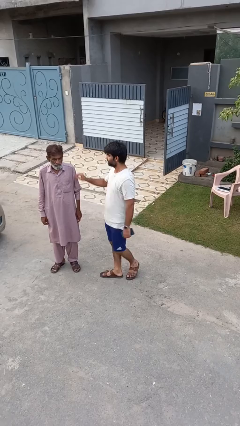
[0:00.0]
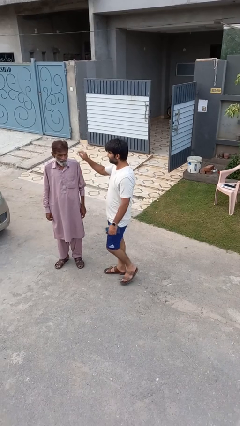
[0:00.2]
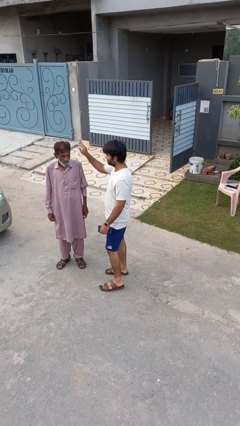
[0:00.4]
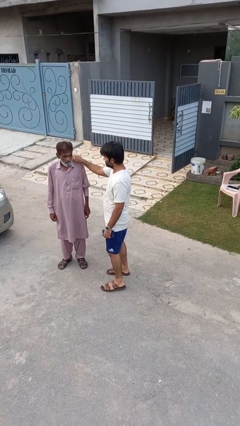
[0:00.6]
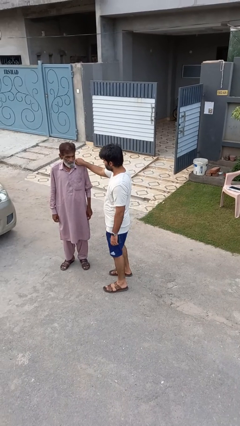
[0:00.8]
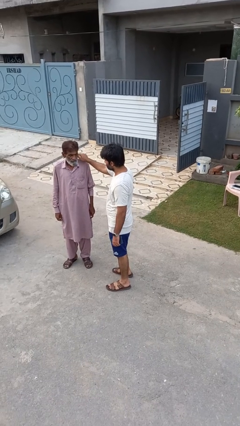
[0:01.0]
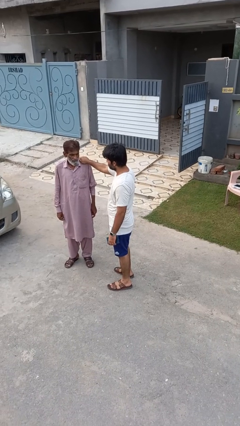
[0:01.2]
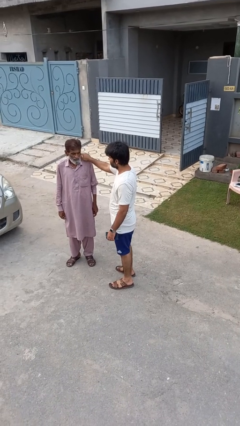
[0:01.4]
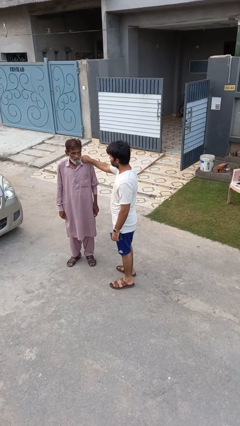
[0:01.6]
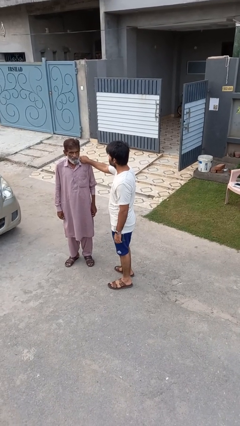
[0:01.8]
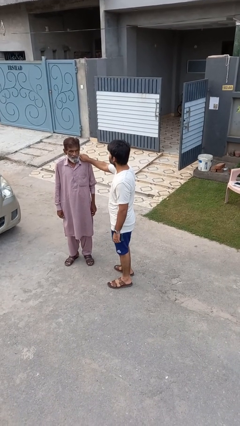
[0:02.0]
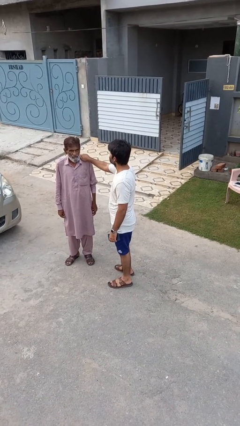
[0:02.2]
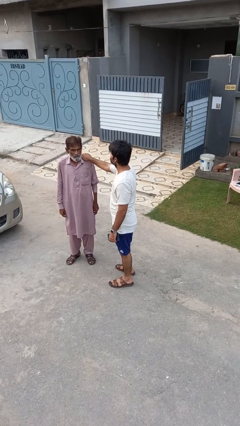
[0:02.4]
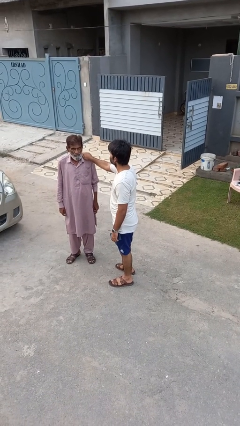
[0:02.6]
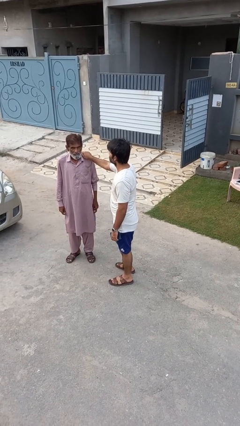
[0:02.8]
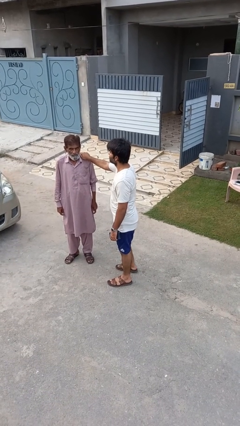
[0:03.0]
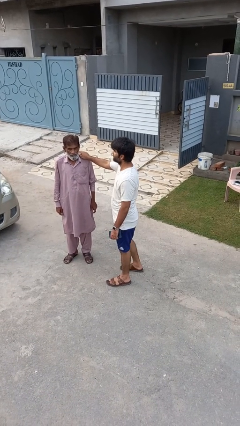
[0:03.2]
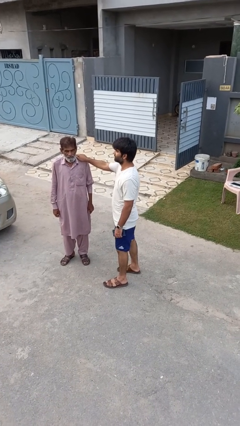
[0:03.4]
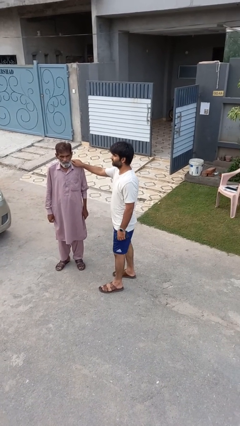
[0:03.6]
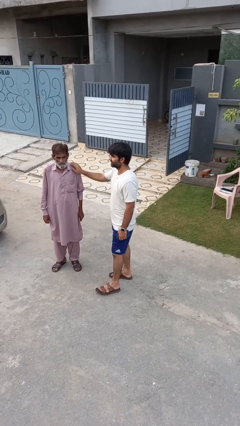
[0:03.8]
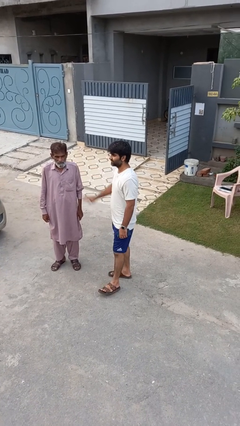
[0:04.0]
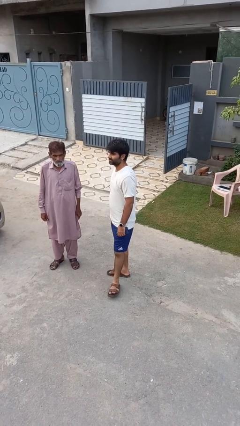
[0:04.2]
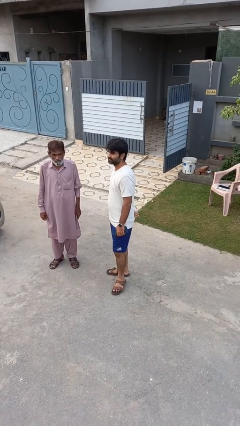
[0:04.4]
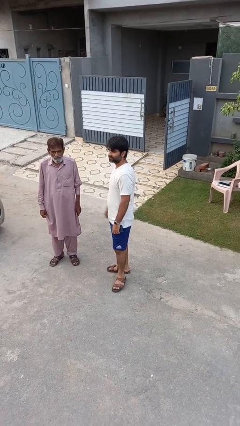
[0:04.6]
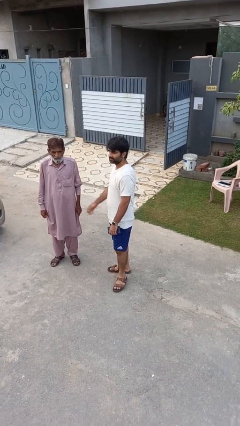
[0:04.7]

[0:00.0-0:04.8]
person pounds shoulders of person

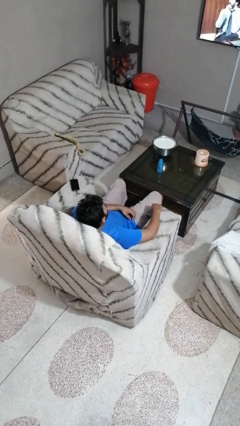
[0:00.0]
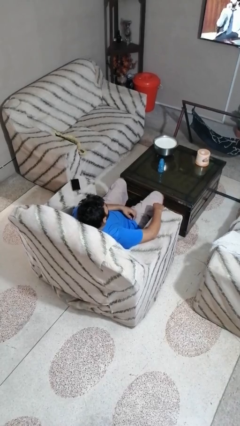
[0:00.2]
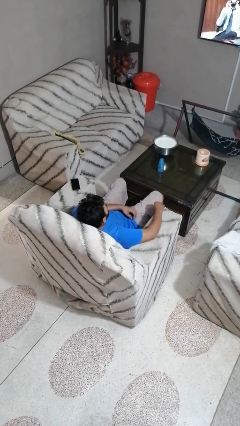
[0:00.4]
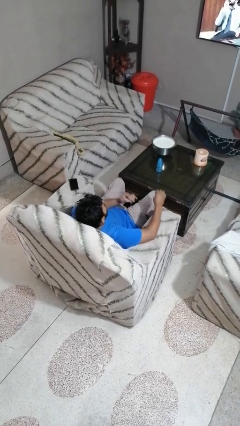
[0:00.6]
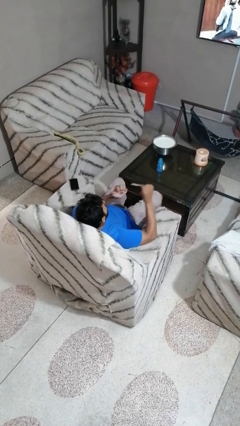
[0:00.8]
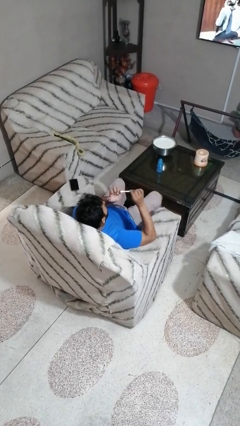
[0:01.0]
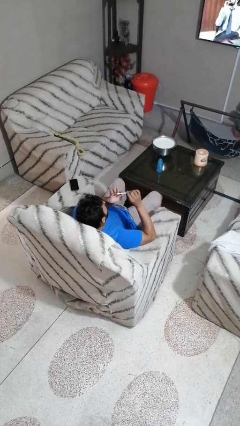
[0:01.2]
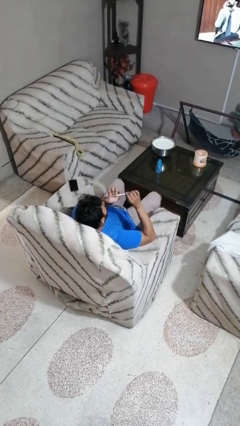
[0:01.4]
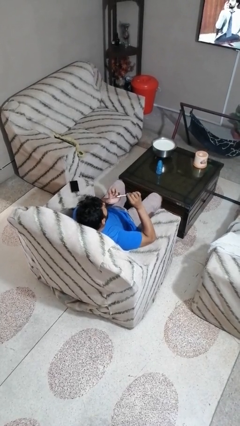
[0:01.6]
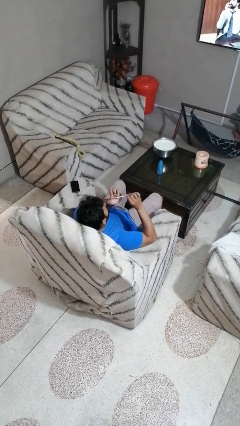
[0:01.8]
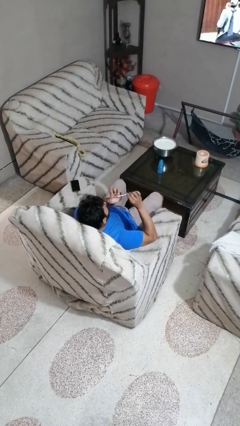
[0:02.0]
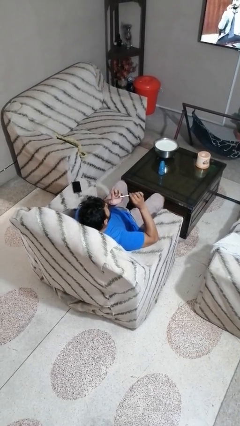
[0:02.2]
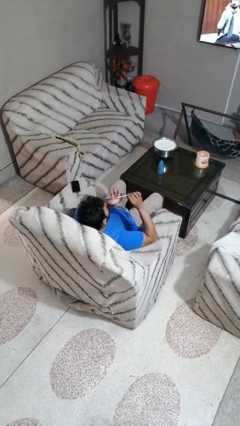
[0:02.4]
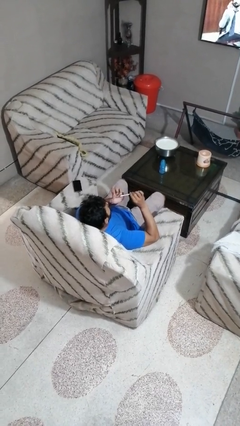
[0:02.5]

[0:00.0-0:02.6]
person files fingernails

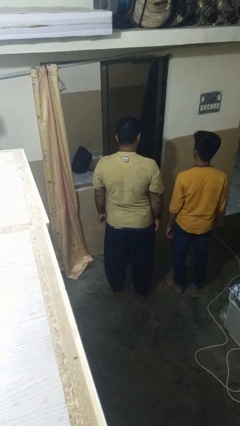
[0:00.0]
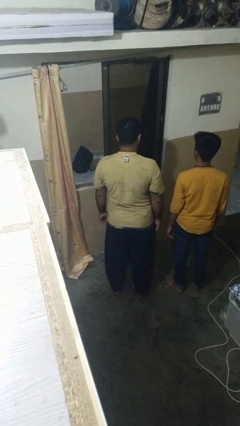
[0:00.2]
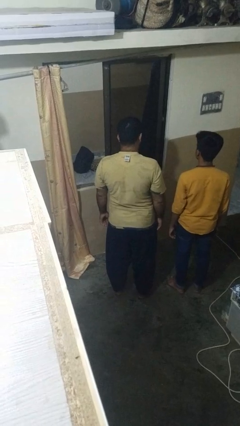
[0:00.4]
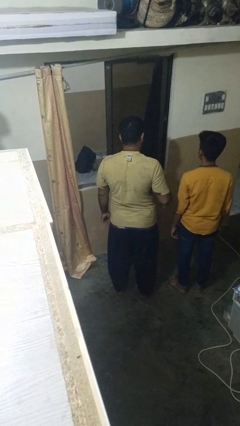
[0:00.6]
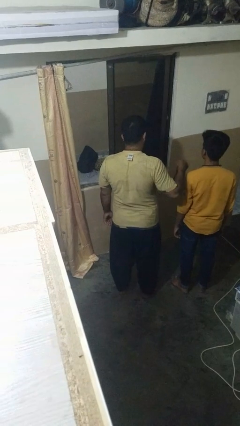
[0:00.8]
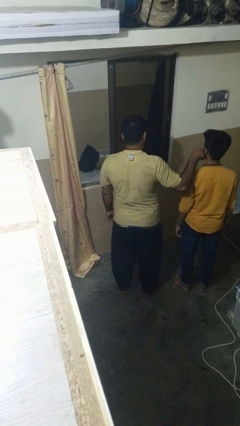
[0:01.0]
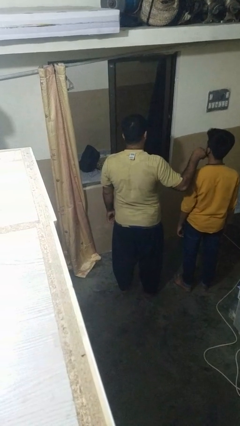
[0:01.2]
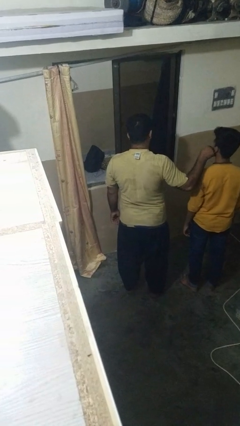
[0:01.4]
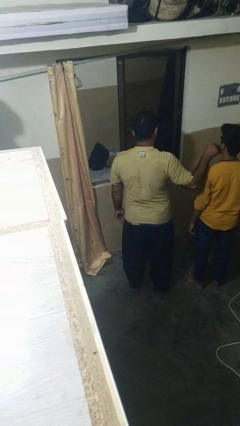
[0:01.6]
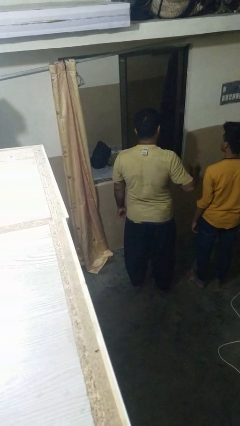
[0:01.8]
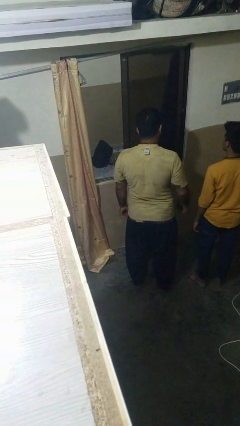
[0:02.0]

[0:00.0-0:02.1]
person touches face of person

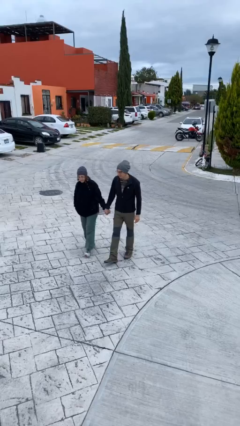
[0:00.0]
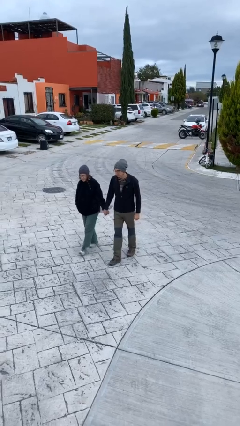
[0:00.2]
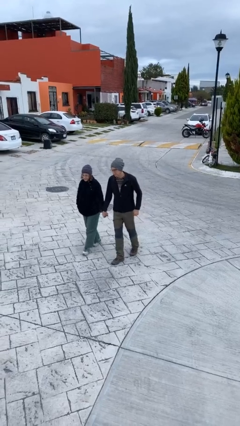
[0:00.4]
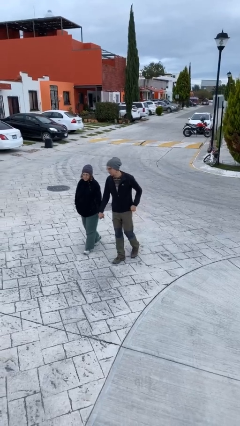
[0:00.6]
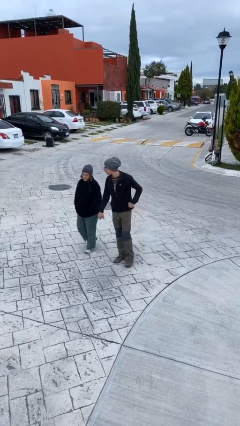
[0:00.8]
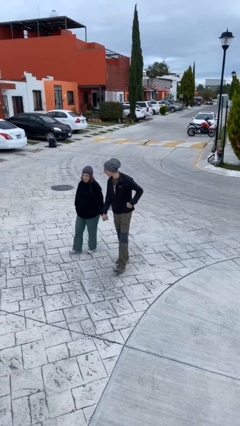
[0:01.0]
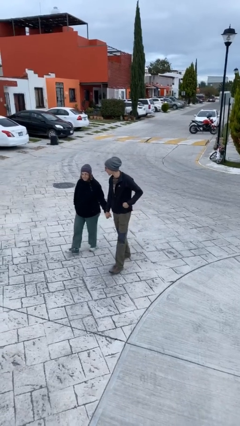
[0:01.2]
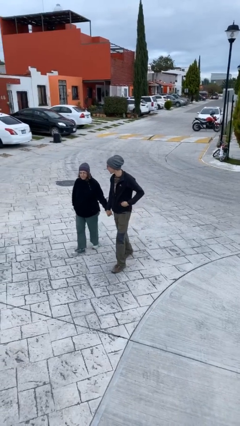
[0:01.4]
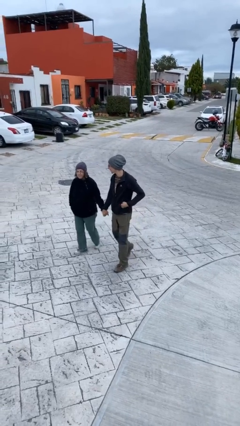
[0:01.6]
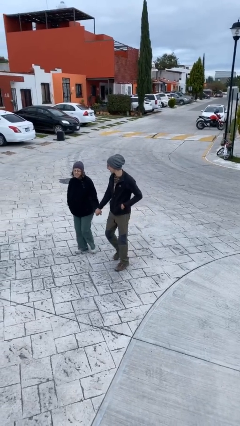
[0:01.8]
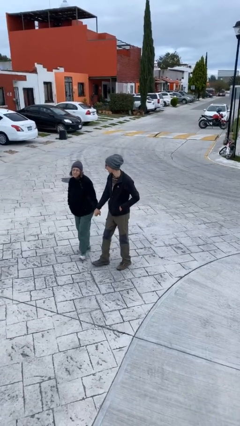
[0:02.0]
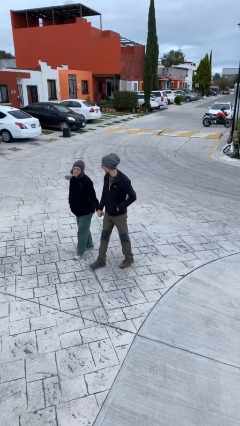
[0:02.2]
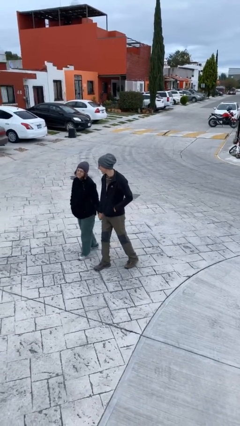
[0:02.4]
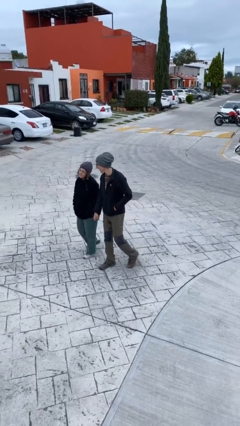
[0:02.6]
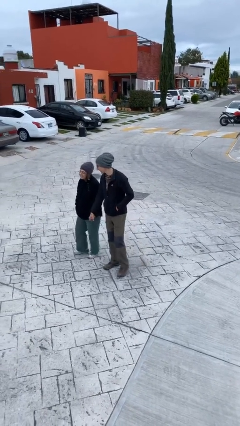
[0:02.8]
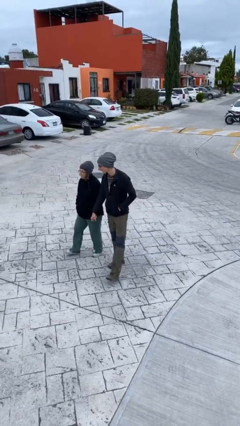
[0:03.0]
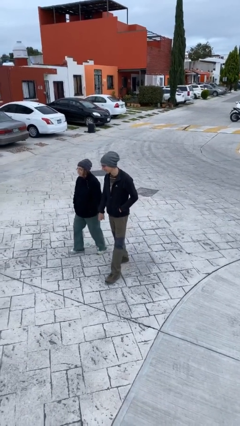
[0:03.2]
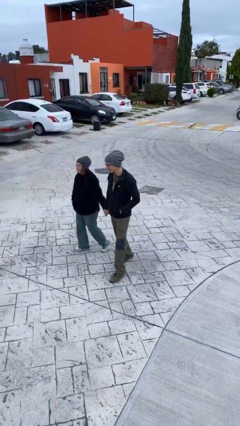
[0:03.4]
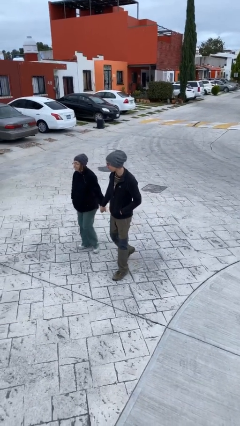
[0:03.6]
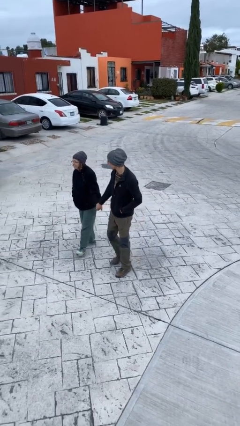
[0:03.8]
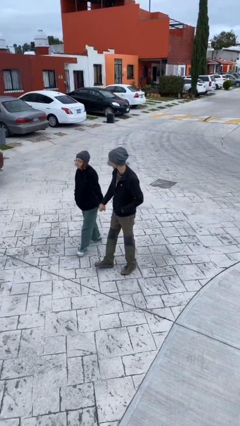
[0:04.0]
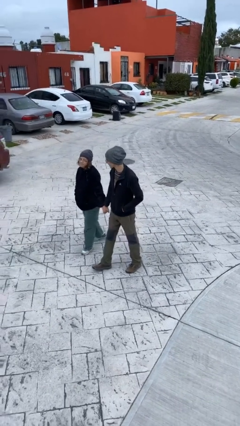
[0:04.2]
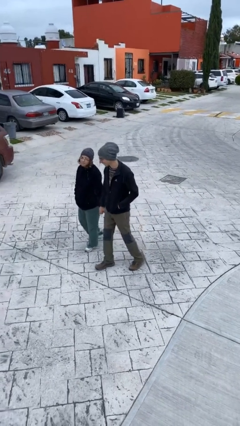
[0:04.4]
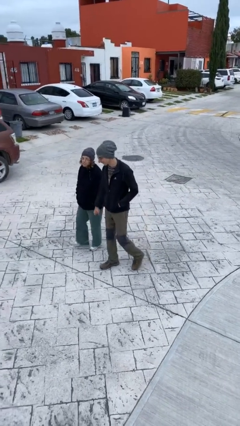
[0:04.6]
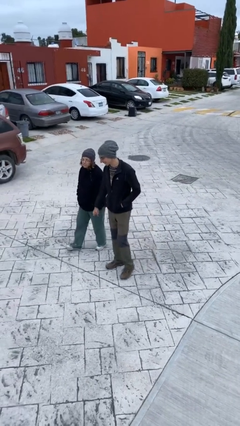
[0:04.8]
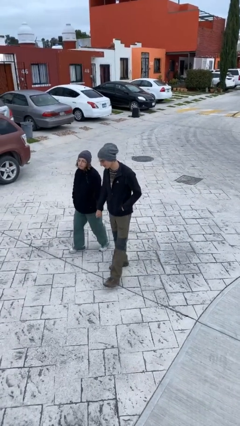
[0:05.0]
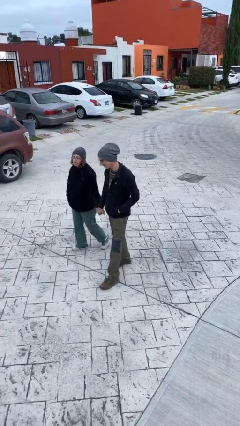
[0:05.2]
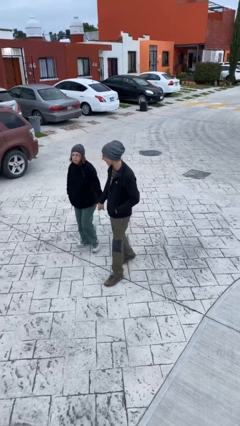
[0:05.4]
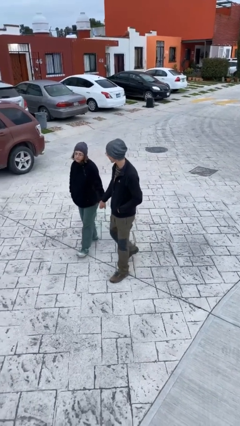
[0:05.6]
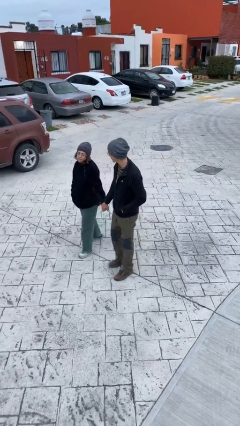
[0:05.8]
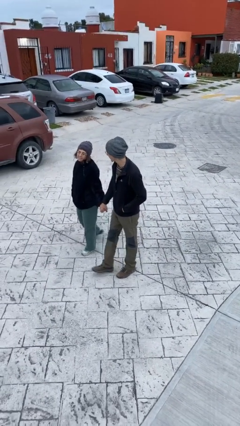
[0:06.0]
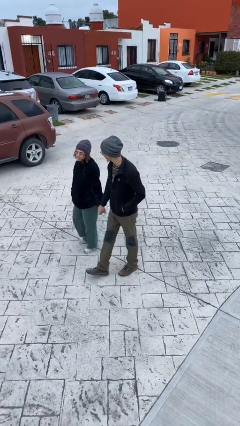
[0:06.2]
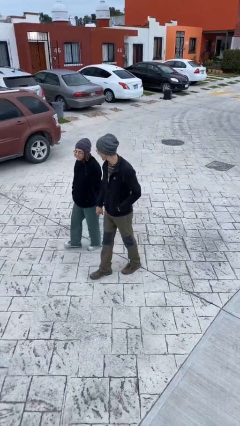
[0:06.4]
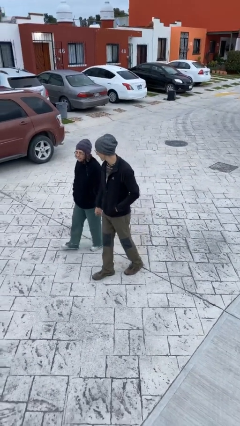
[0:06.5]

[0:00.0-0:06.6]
person holds hand

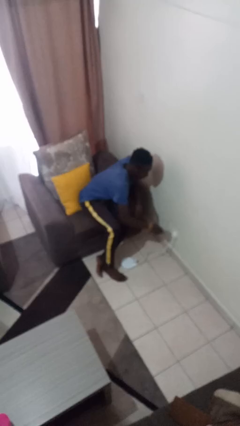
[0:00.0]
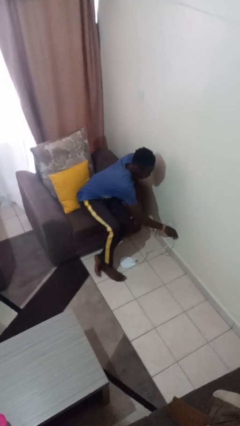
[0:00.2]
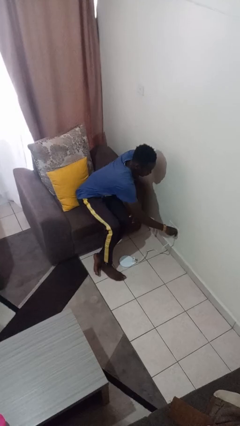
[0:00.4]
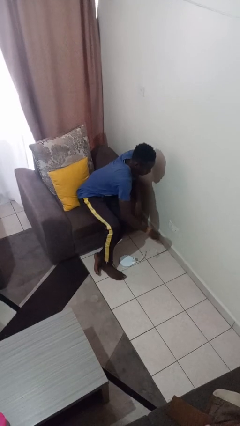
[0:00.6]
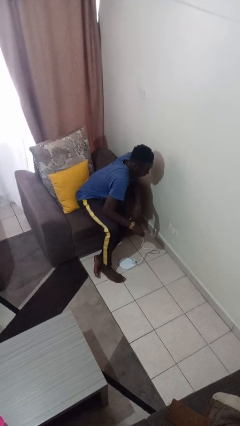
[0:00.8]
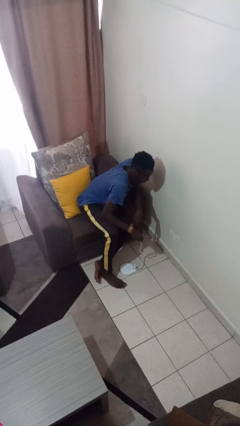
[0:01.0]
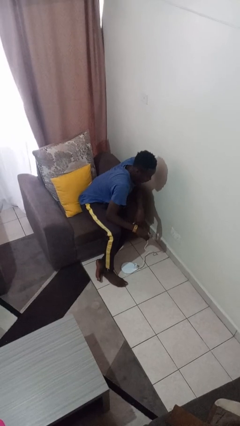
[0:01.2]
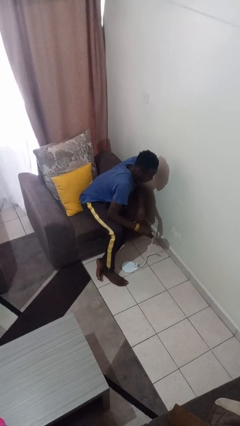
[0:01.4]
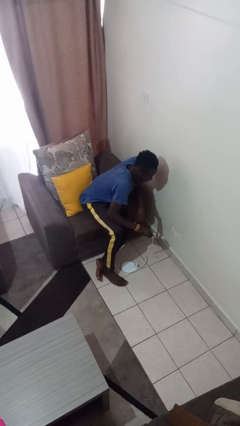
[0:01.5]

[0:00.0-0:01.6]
person unplugs from electrical socket
